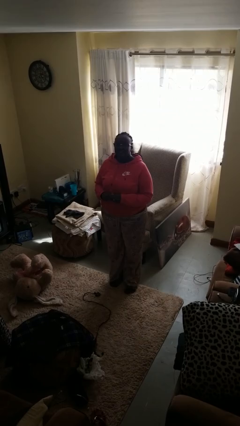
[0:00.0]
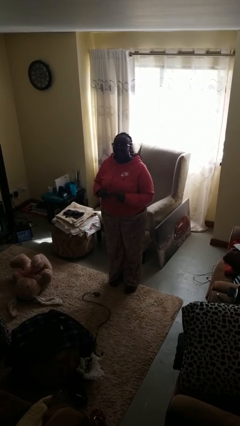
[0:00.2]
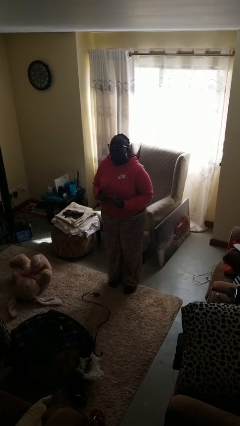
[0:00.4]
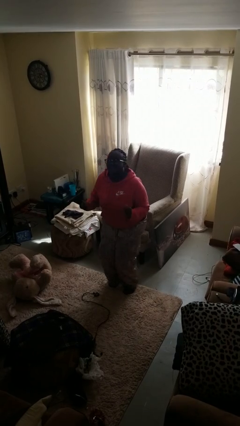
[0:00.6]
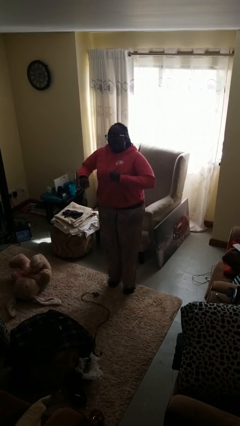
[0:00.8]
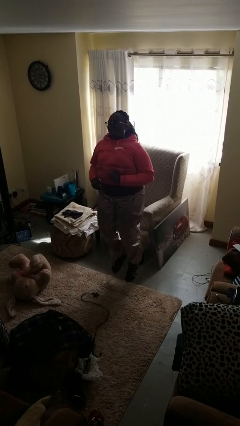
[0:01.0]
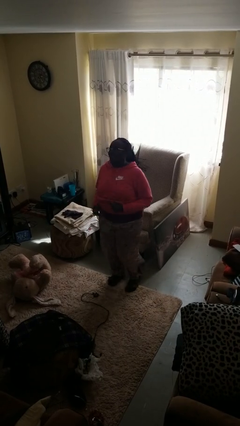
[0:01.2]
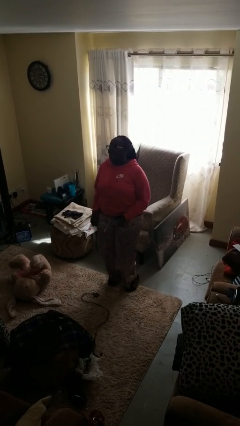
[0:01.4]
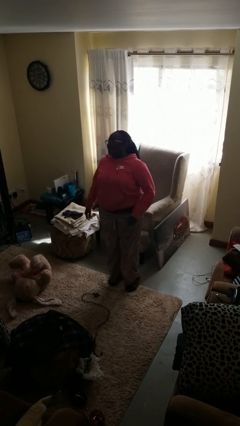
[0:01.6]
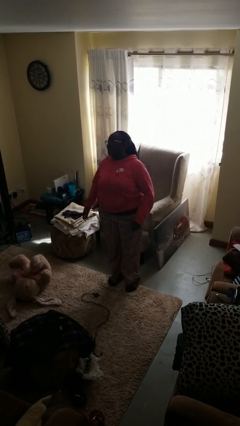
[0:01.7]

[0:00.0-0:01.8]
person jumps

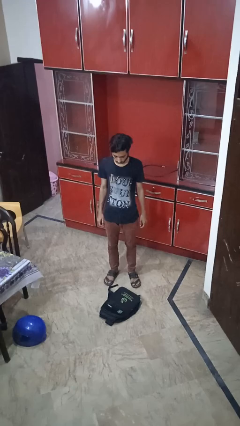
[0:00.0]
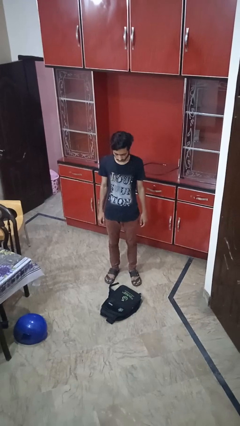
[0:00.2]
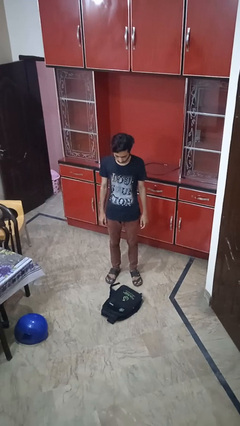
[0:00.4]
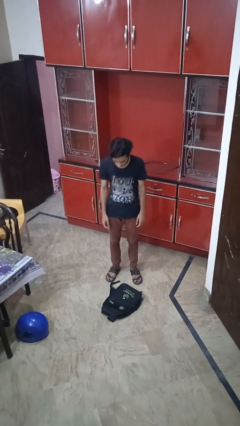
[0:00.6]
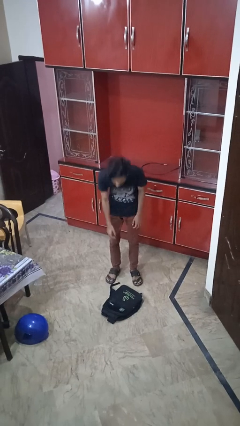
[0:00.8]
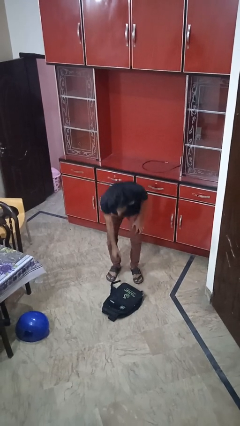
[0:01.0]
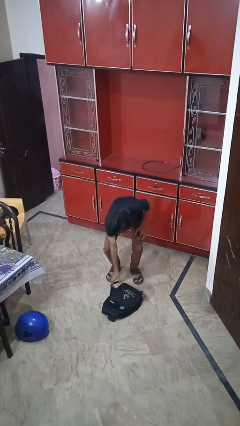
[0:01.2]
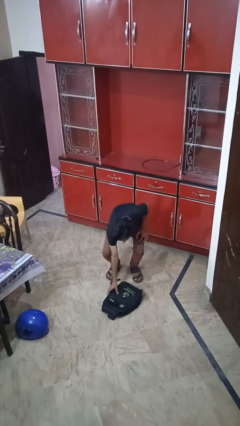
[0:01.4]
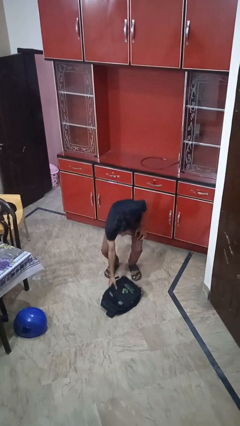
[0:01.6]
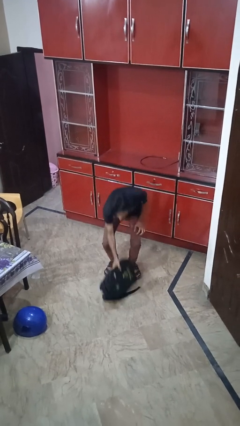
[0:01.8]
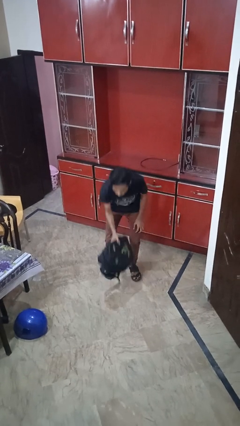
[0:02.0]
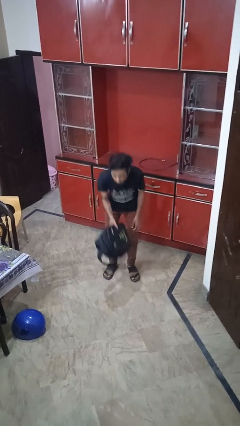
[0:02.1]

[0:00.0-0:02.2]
person picks up object from floor

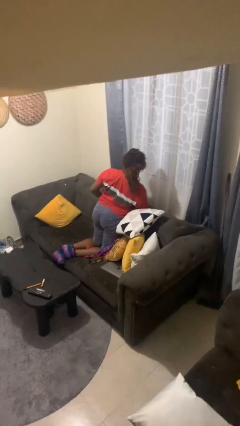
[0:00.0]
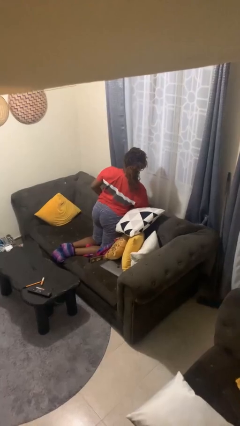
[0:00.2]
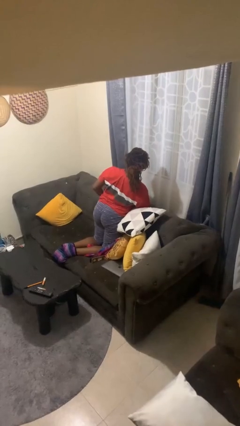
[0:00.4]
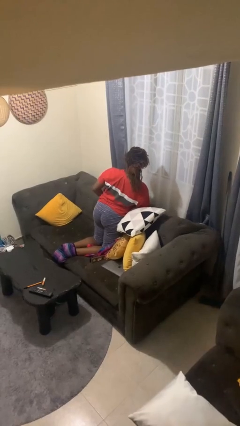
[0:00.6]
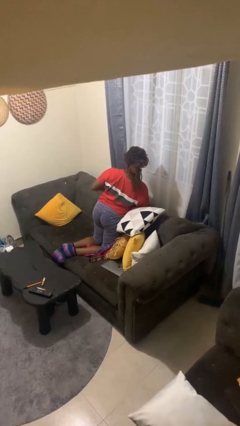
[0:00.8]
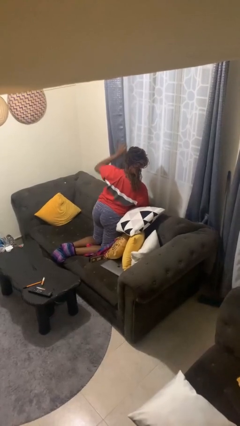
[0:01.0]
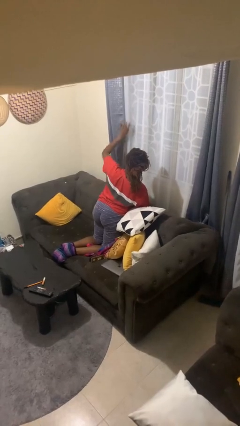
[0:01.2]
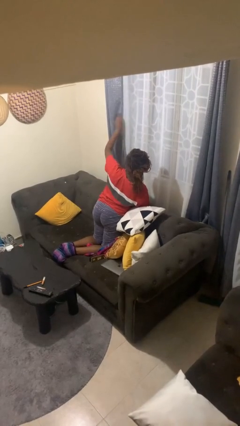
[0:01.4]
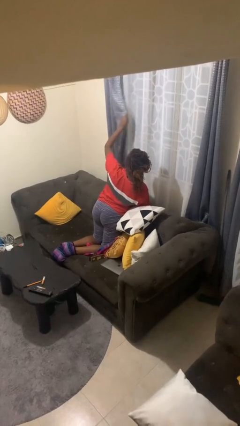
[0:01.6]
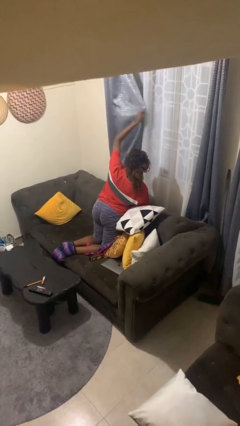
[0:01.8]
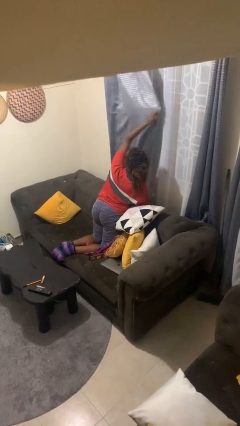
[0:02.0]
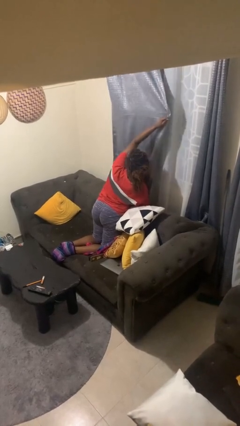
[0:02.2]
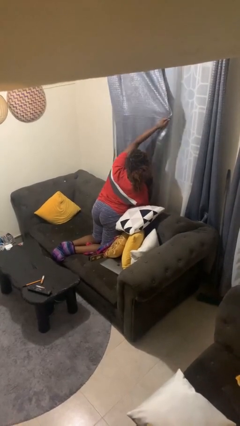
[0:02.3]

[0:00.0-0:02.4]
person closes curtains

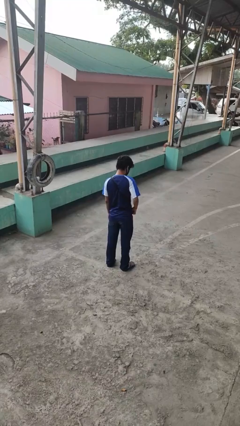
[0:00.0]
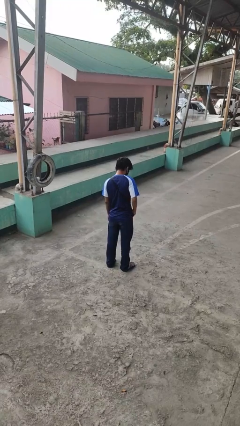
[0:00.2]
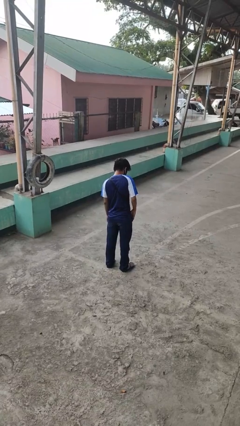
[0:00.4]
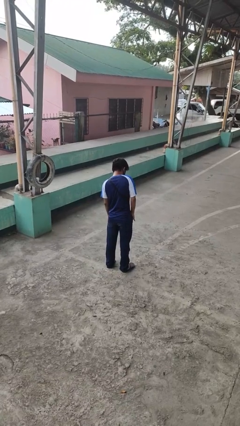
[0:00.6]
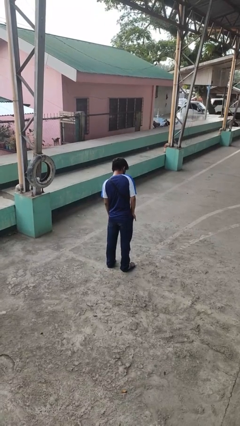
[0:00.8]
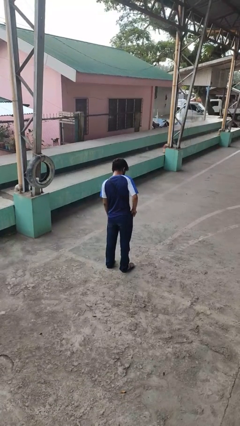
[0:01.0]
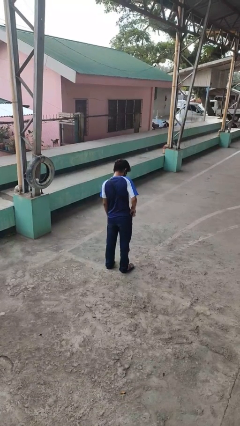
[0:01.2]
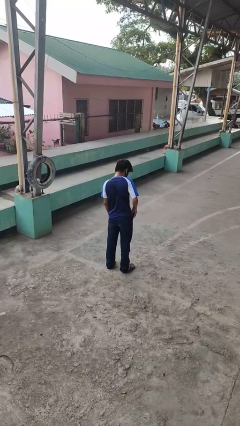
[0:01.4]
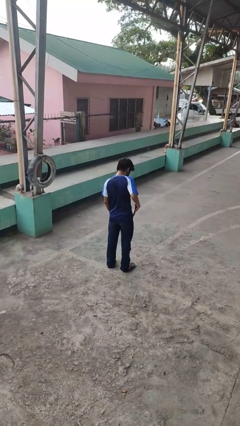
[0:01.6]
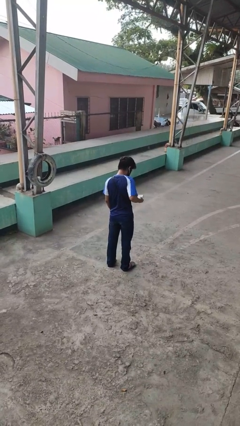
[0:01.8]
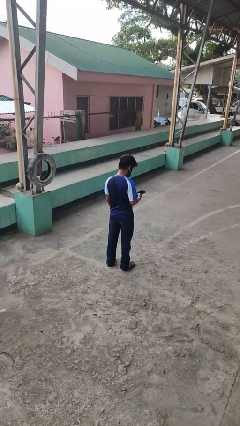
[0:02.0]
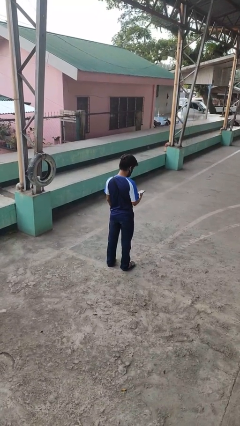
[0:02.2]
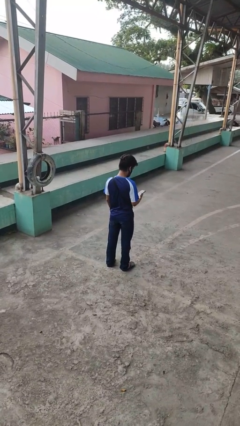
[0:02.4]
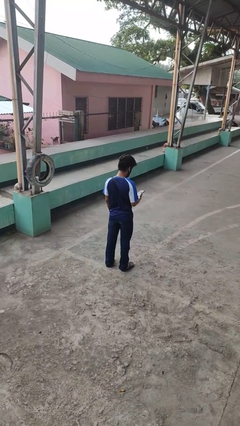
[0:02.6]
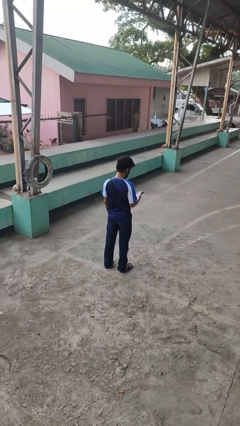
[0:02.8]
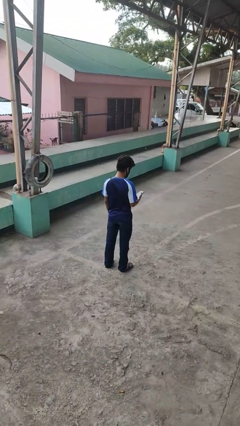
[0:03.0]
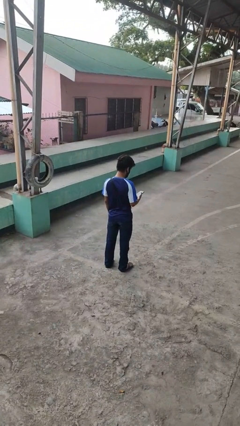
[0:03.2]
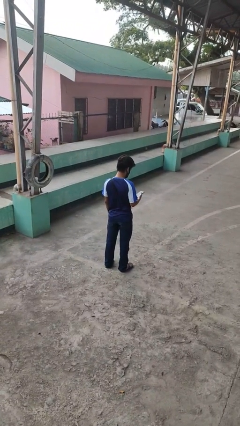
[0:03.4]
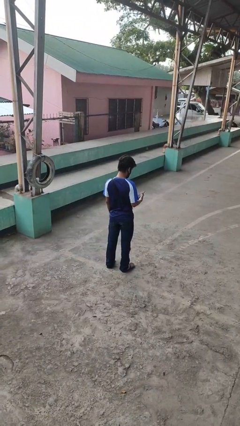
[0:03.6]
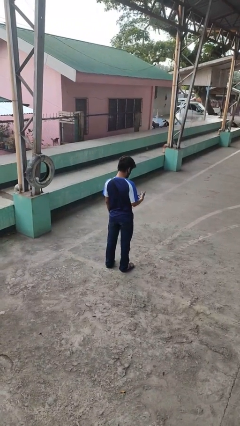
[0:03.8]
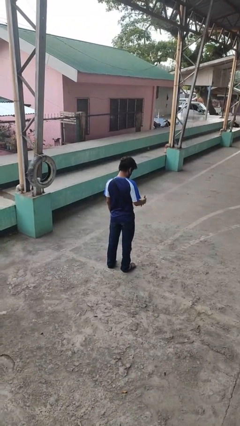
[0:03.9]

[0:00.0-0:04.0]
person takes phone from pocket

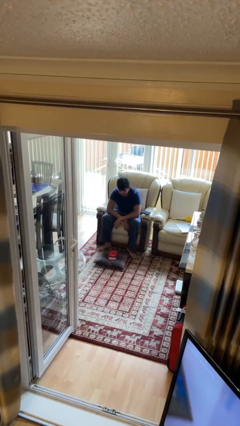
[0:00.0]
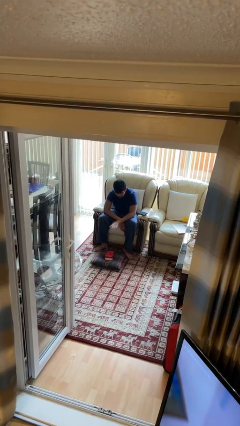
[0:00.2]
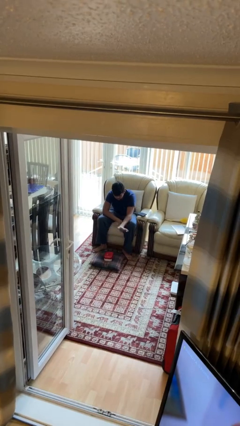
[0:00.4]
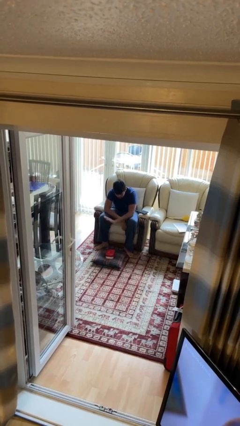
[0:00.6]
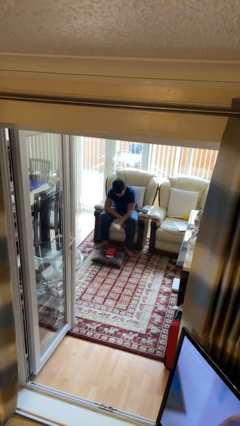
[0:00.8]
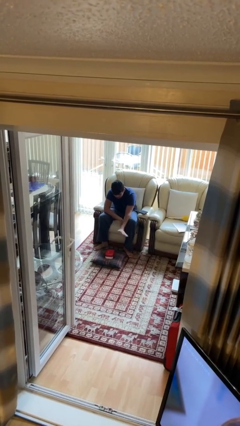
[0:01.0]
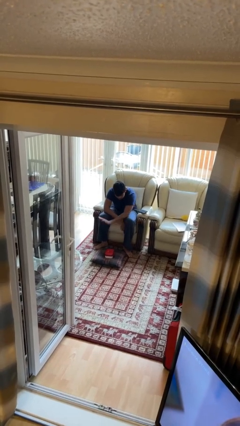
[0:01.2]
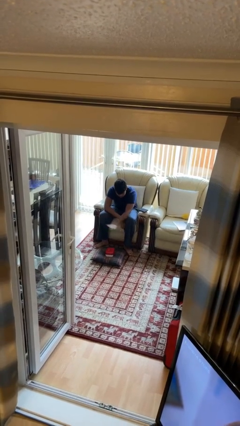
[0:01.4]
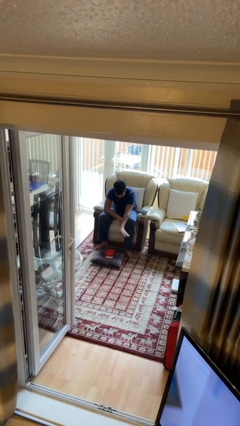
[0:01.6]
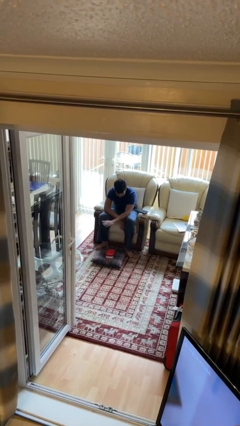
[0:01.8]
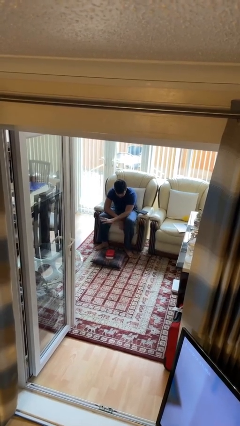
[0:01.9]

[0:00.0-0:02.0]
person waves hand over object

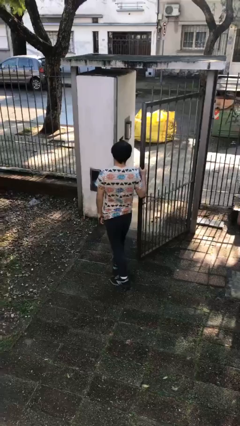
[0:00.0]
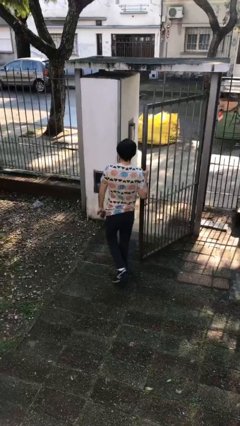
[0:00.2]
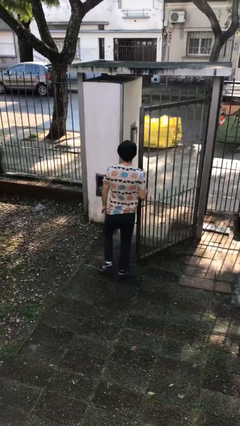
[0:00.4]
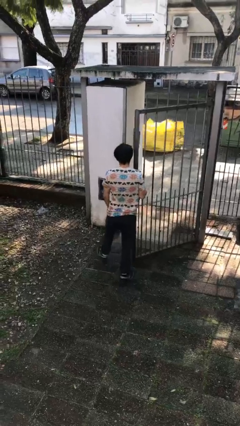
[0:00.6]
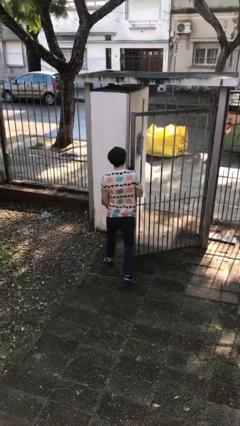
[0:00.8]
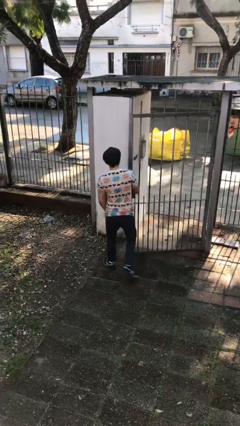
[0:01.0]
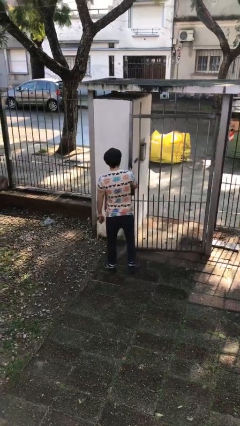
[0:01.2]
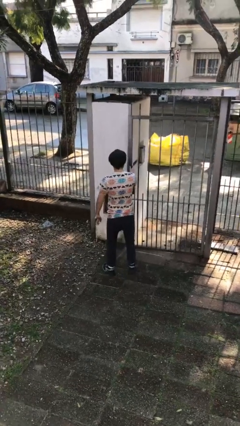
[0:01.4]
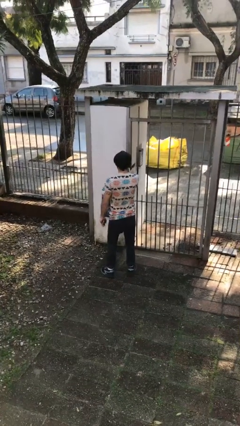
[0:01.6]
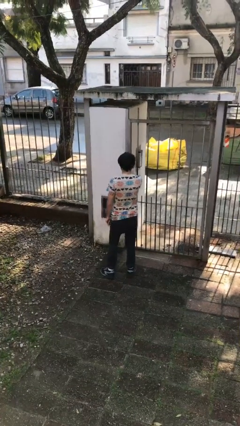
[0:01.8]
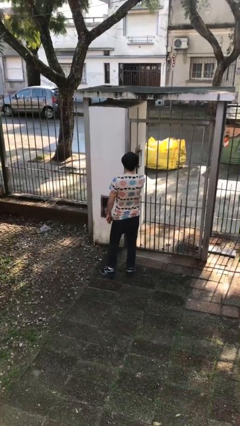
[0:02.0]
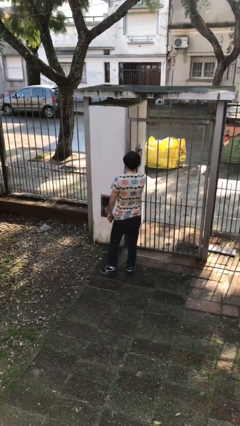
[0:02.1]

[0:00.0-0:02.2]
person closes gate

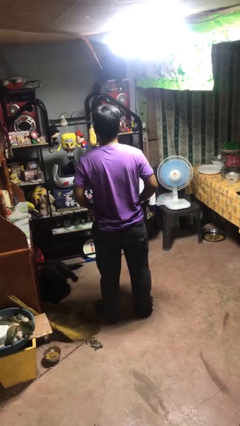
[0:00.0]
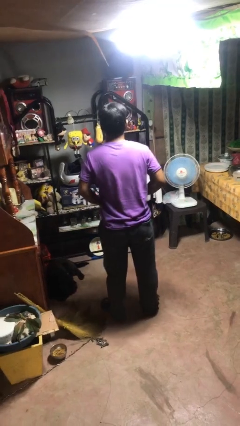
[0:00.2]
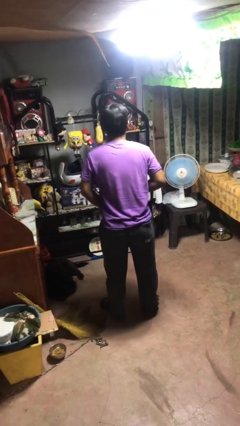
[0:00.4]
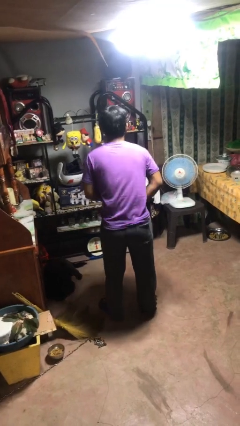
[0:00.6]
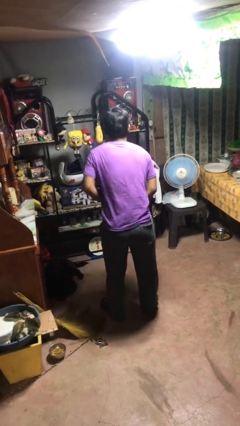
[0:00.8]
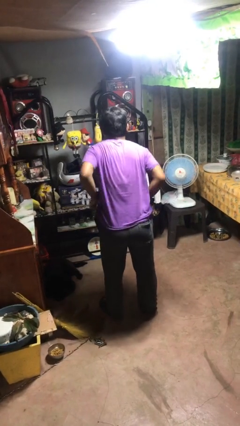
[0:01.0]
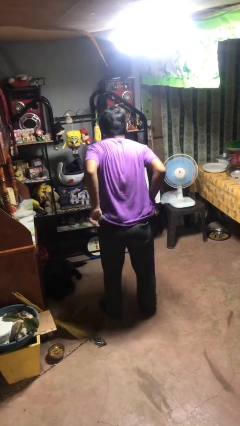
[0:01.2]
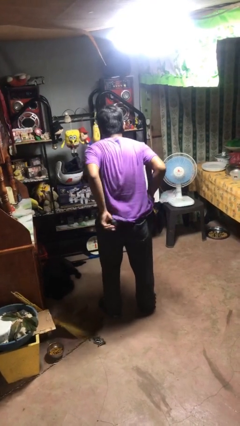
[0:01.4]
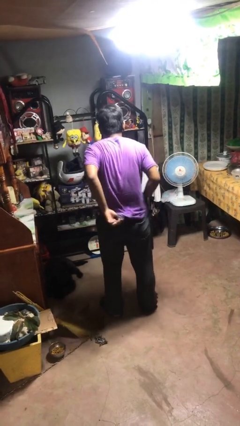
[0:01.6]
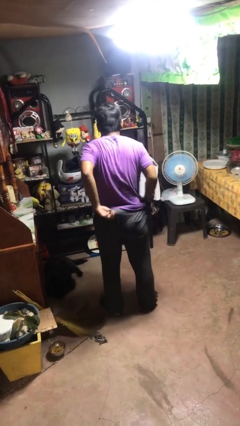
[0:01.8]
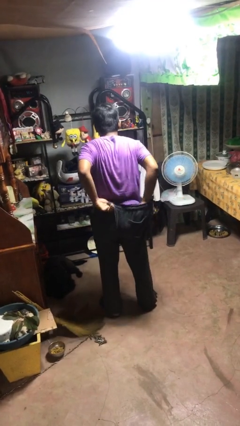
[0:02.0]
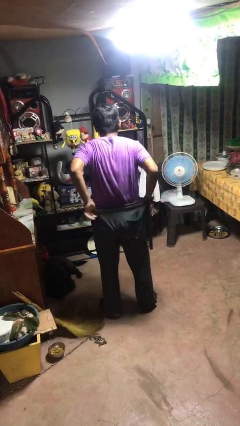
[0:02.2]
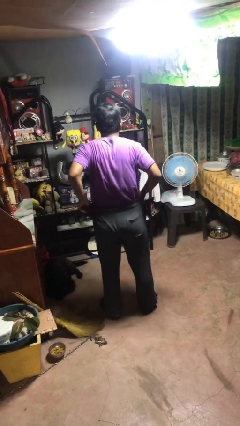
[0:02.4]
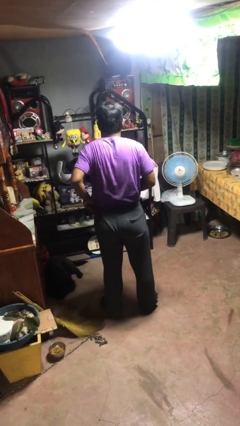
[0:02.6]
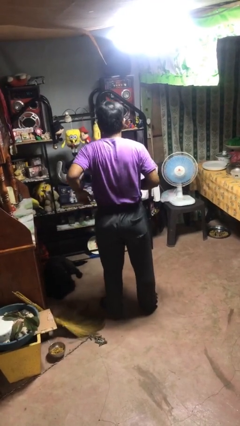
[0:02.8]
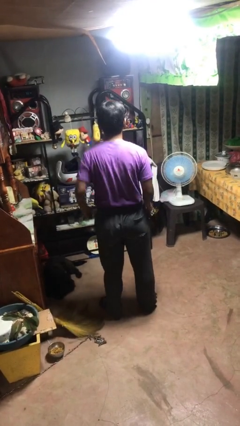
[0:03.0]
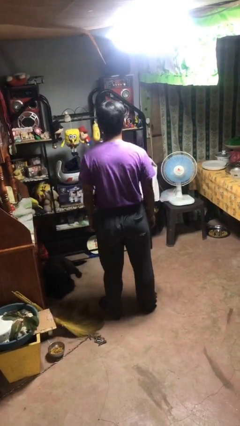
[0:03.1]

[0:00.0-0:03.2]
person tucks in shirt
